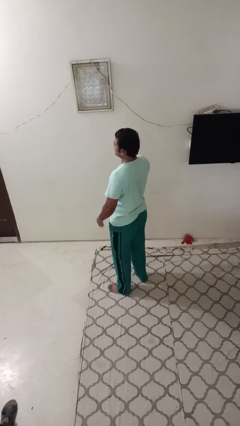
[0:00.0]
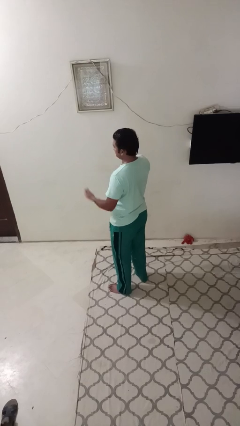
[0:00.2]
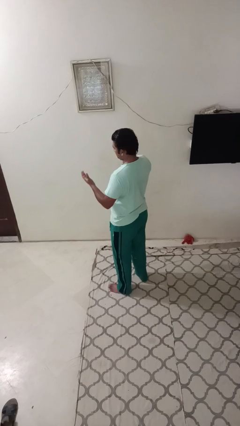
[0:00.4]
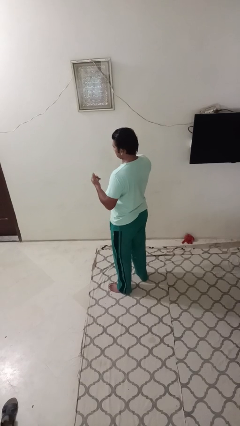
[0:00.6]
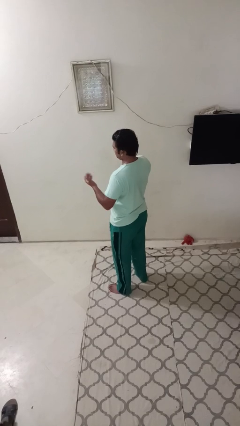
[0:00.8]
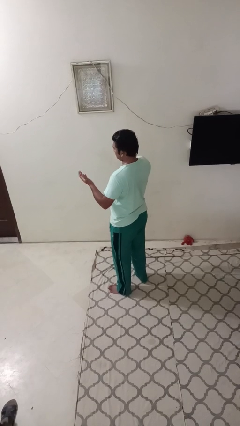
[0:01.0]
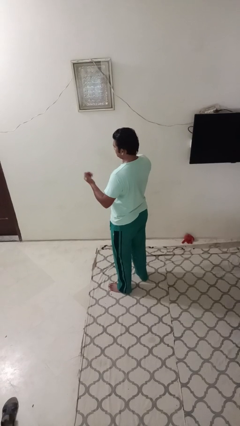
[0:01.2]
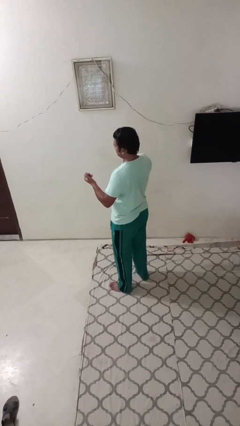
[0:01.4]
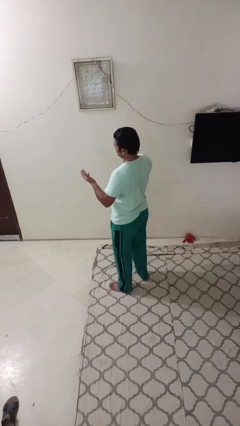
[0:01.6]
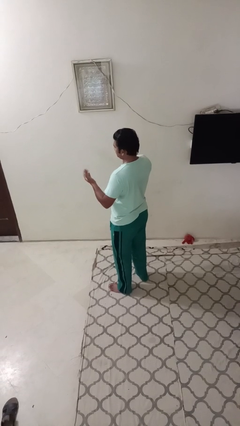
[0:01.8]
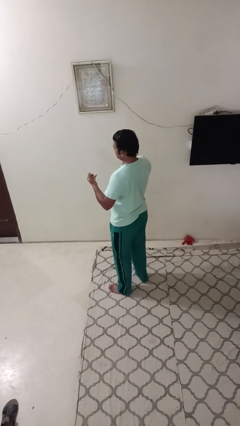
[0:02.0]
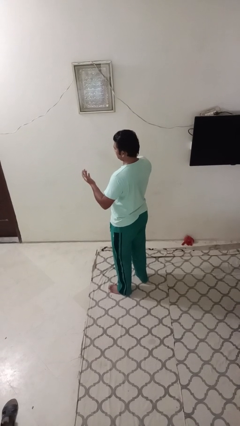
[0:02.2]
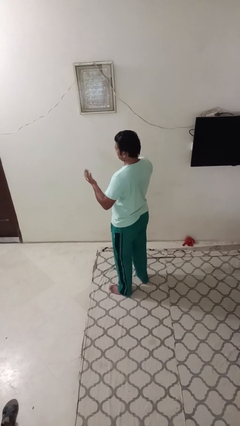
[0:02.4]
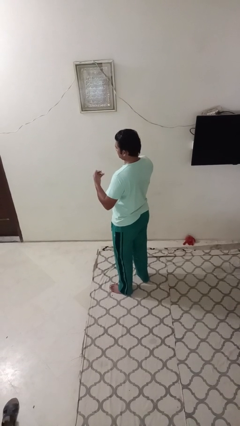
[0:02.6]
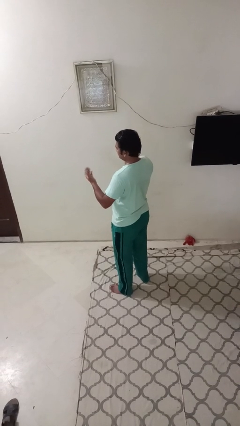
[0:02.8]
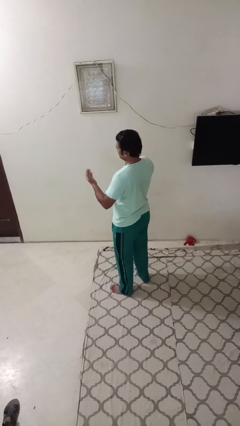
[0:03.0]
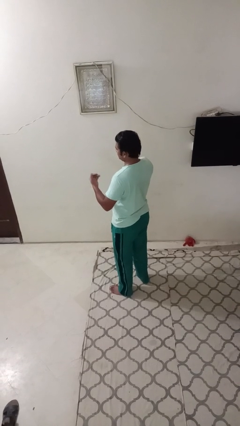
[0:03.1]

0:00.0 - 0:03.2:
person gestures come here

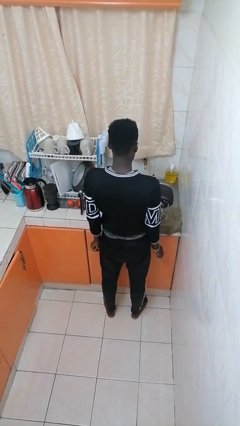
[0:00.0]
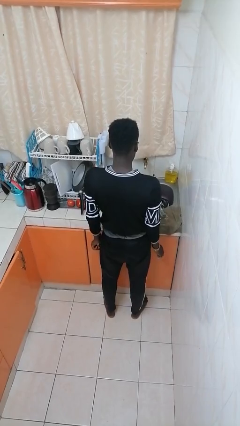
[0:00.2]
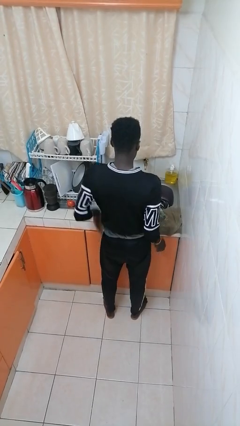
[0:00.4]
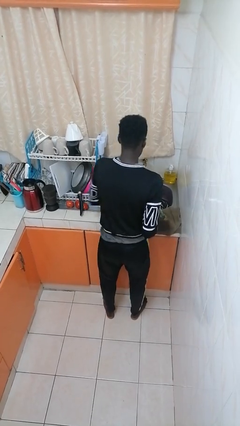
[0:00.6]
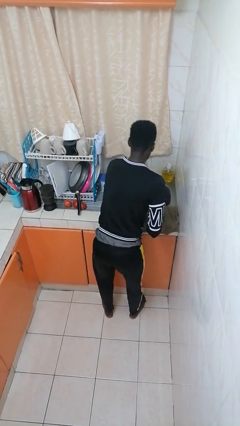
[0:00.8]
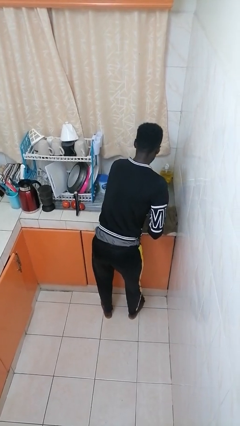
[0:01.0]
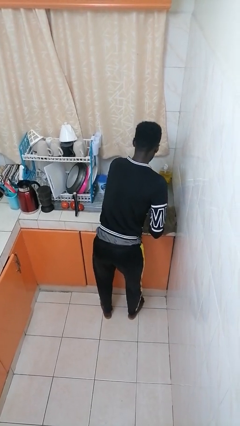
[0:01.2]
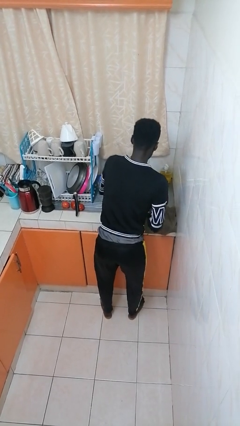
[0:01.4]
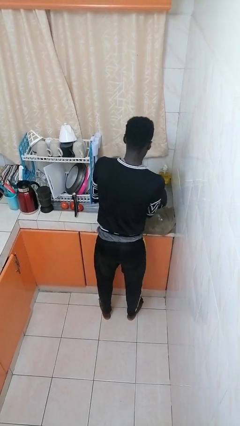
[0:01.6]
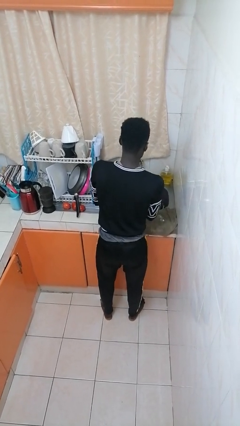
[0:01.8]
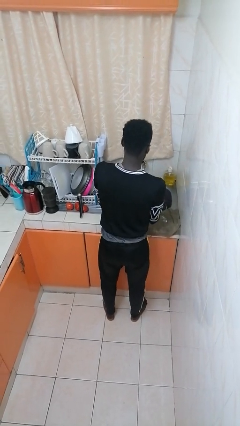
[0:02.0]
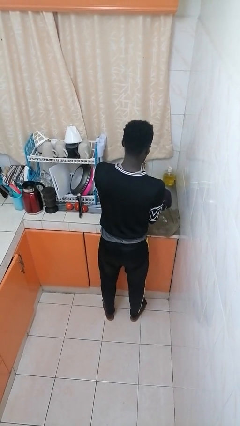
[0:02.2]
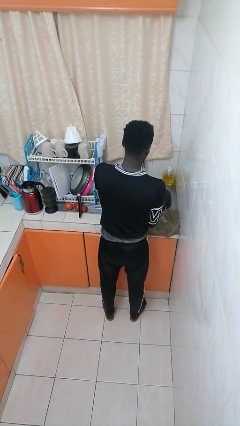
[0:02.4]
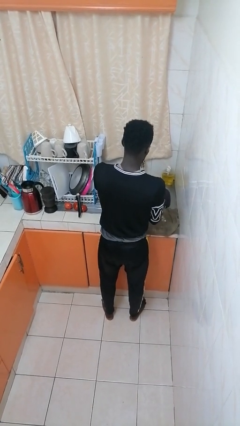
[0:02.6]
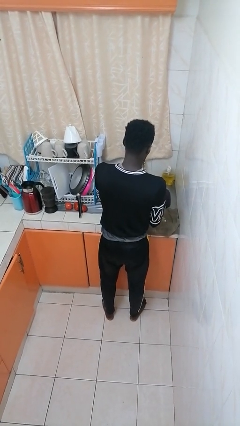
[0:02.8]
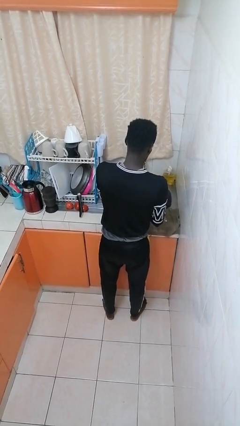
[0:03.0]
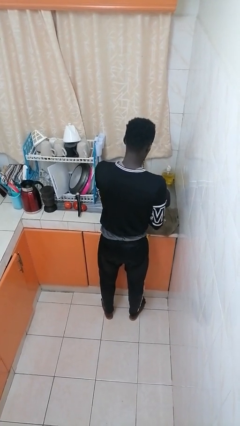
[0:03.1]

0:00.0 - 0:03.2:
person washes dish

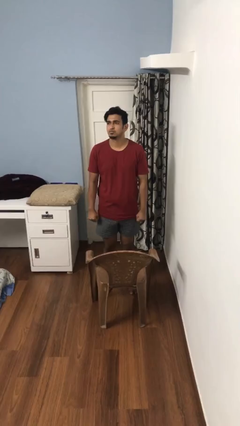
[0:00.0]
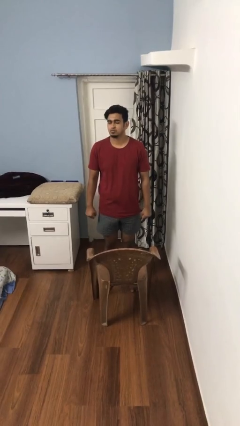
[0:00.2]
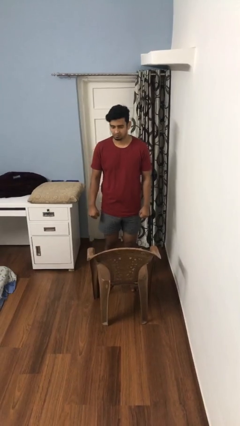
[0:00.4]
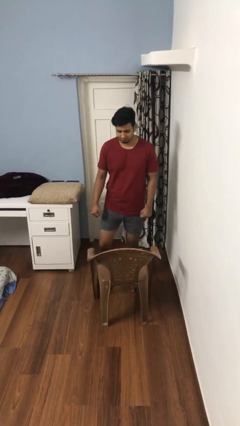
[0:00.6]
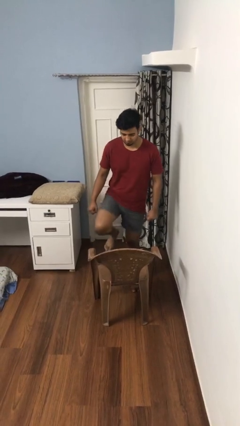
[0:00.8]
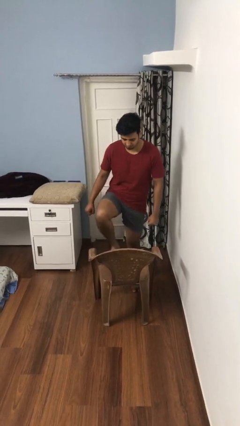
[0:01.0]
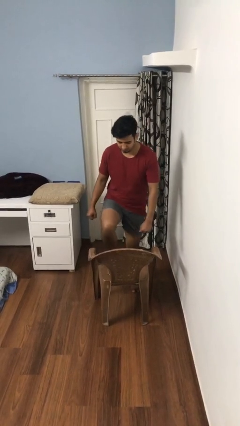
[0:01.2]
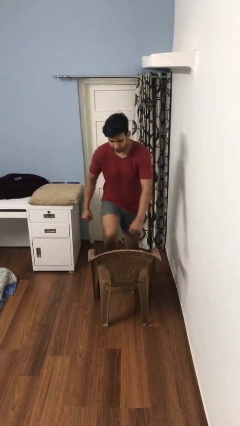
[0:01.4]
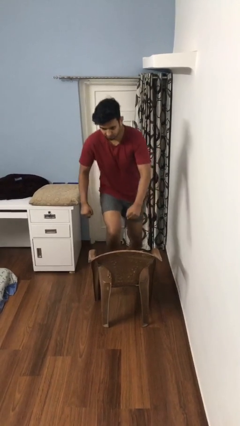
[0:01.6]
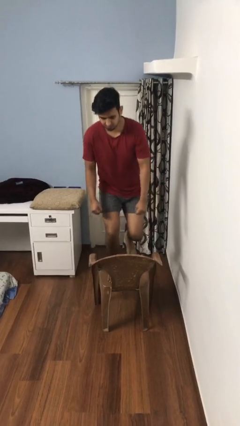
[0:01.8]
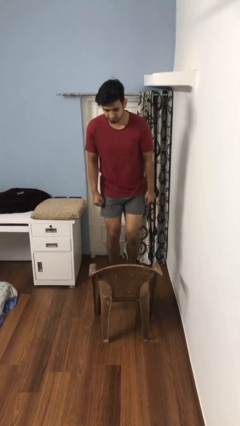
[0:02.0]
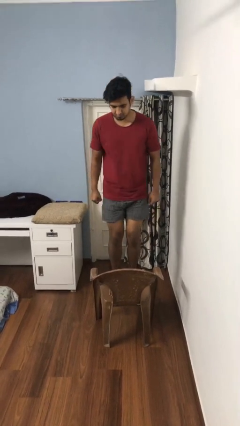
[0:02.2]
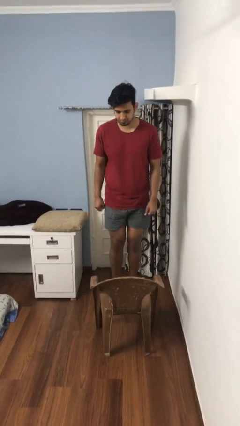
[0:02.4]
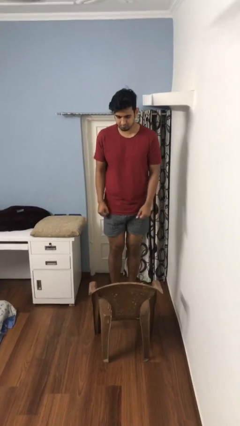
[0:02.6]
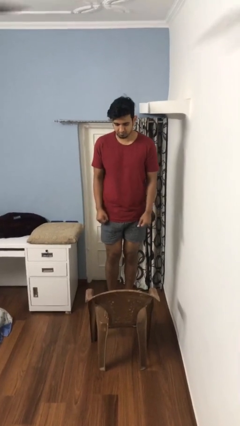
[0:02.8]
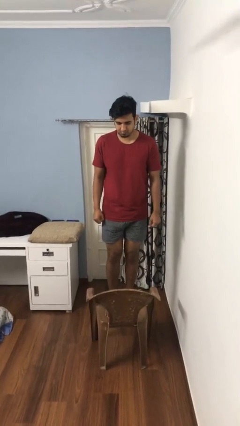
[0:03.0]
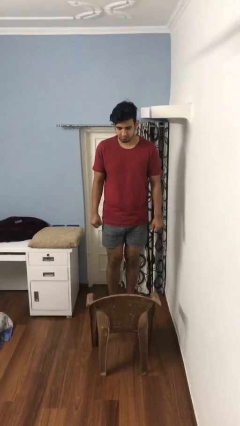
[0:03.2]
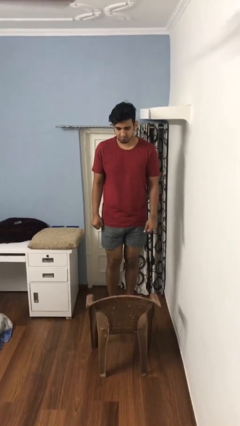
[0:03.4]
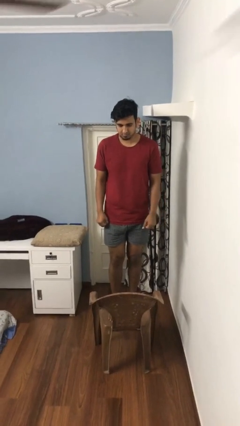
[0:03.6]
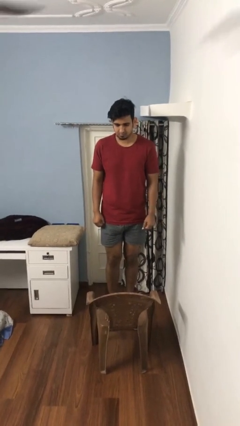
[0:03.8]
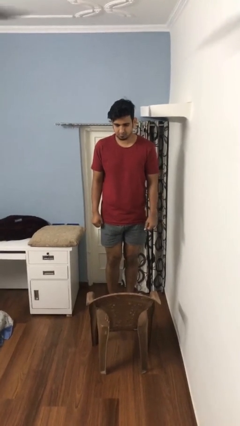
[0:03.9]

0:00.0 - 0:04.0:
person climbs on chair

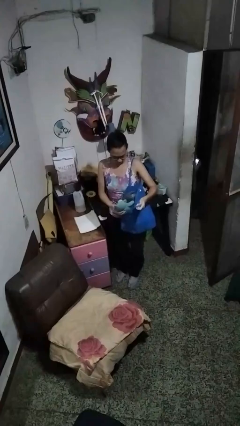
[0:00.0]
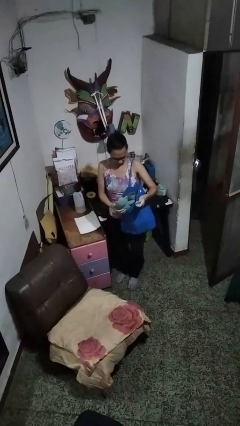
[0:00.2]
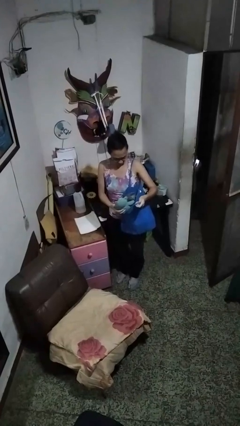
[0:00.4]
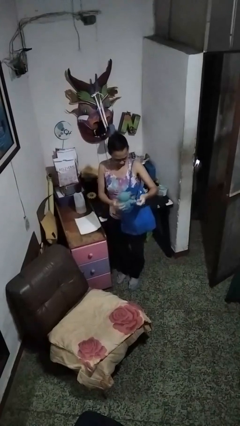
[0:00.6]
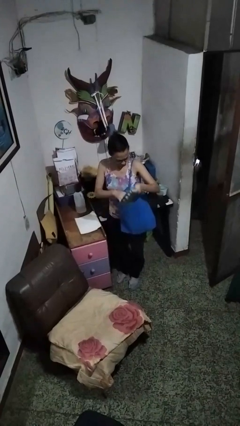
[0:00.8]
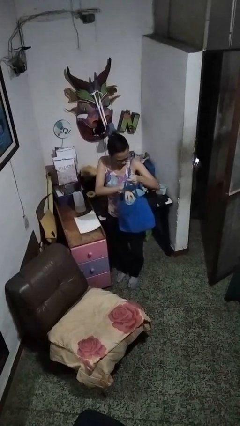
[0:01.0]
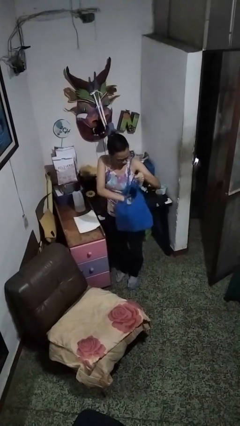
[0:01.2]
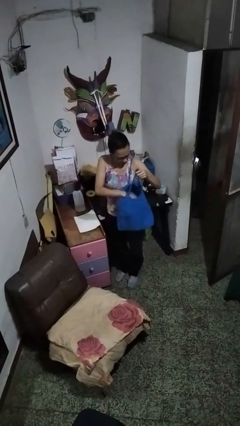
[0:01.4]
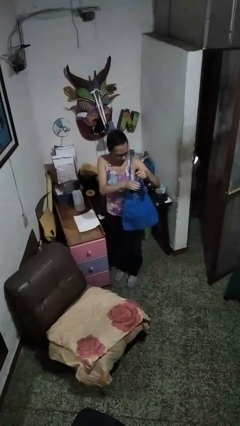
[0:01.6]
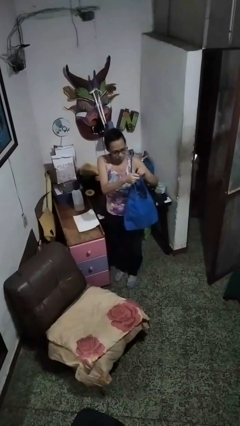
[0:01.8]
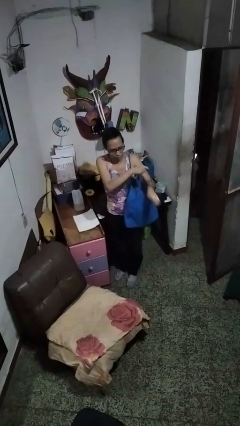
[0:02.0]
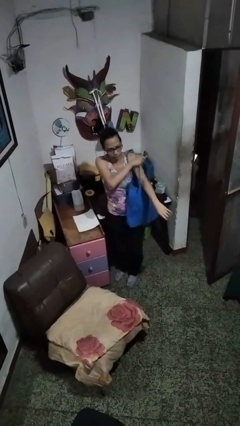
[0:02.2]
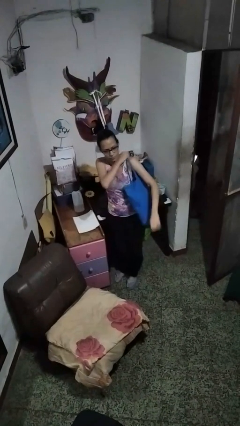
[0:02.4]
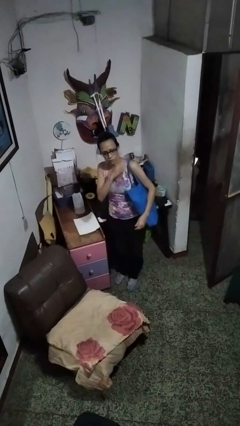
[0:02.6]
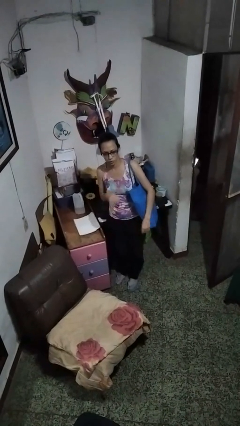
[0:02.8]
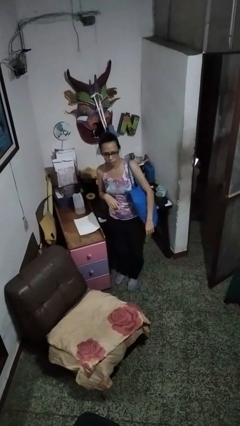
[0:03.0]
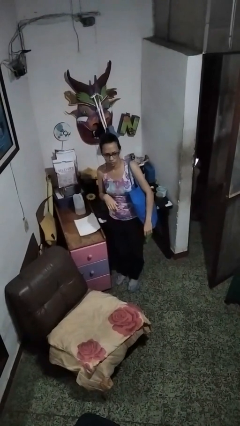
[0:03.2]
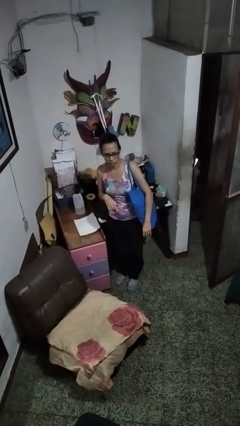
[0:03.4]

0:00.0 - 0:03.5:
person puts object into bag

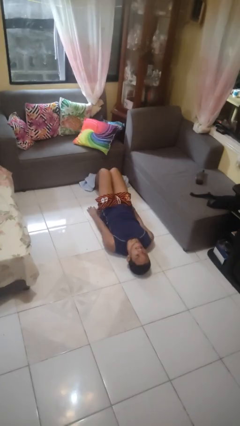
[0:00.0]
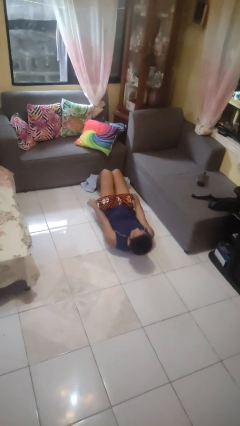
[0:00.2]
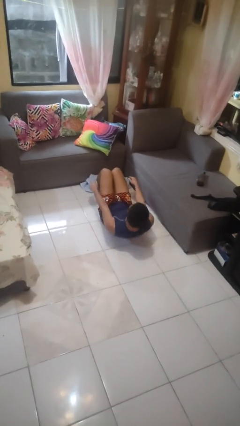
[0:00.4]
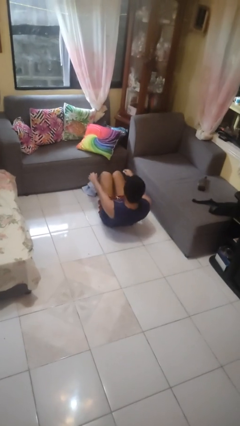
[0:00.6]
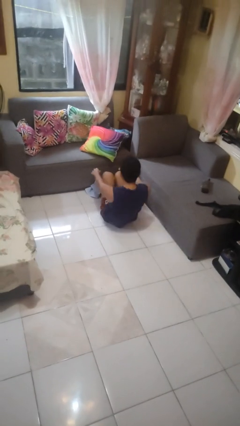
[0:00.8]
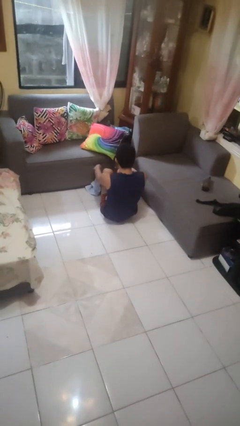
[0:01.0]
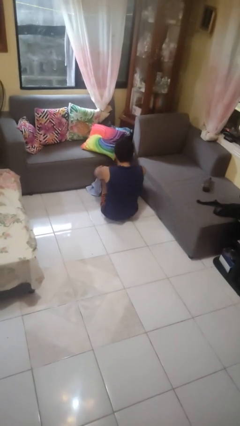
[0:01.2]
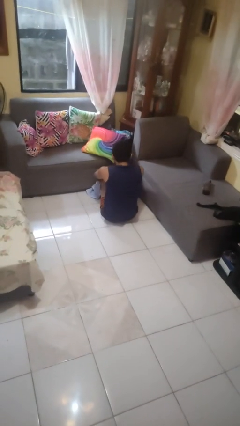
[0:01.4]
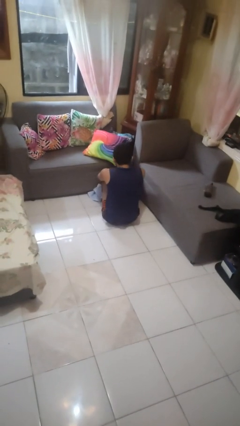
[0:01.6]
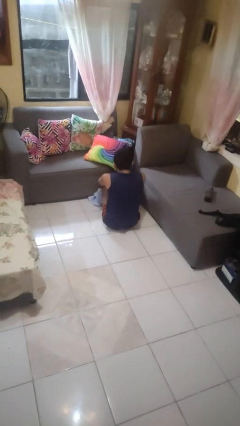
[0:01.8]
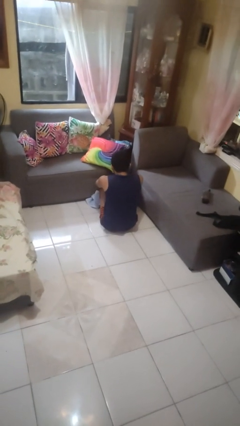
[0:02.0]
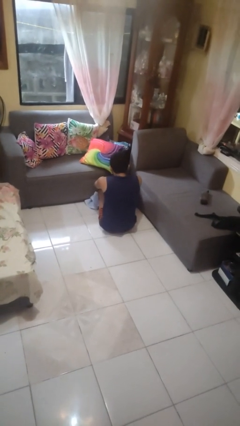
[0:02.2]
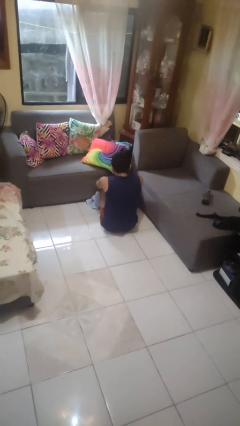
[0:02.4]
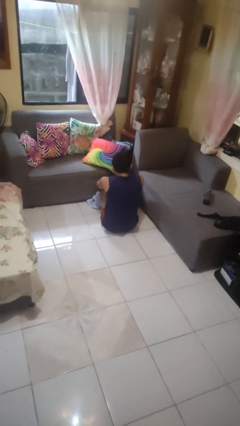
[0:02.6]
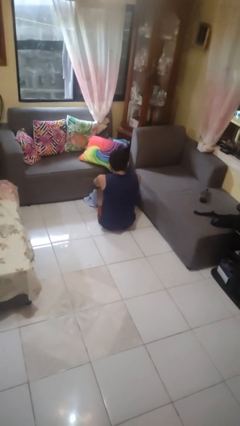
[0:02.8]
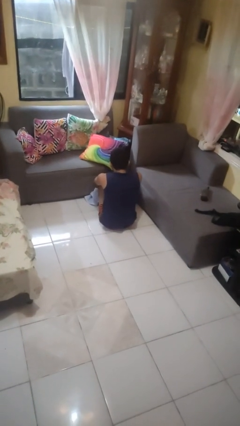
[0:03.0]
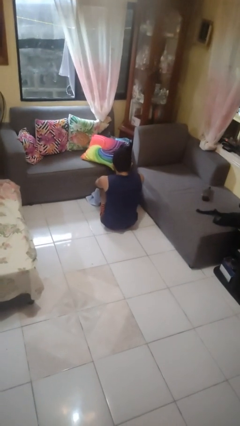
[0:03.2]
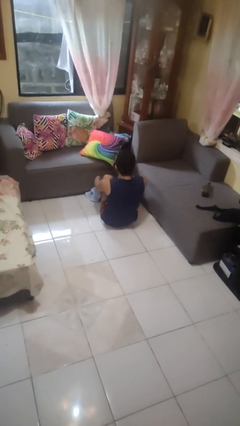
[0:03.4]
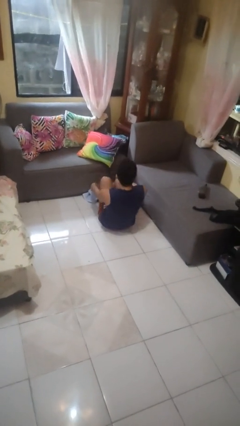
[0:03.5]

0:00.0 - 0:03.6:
person exercises with situp

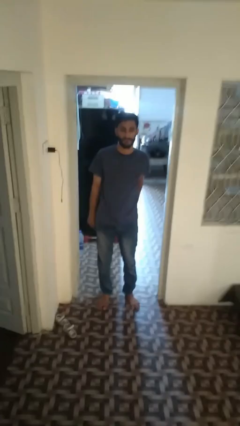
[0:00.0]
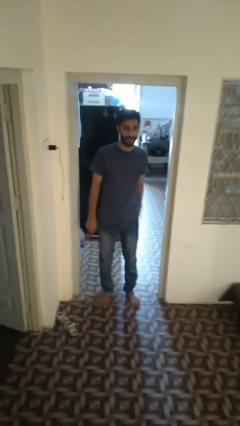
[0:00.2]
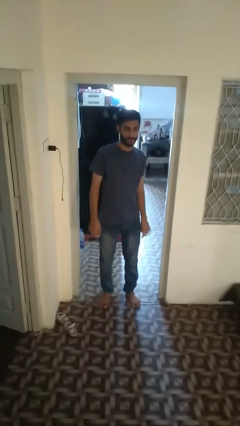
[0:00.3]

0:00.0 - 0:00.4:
person gestures number three
